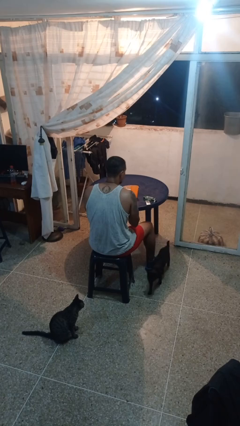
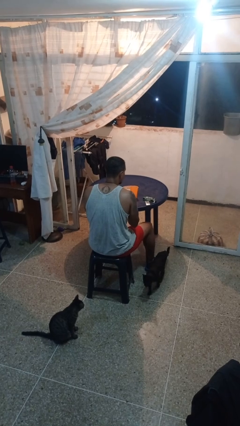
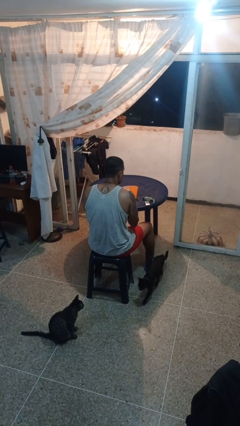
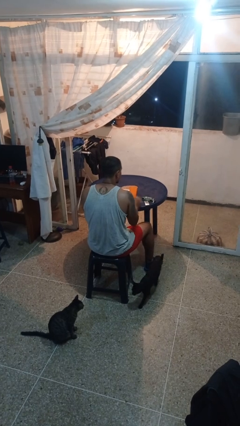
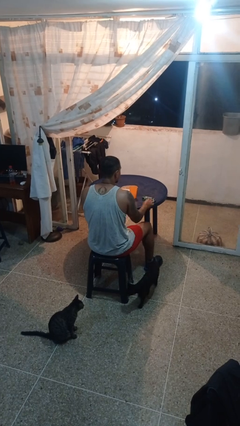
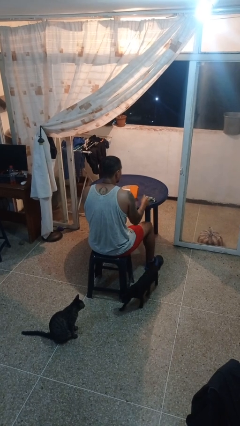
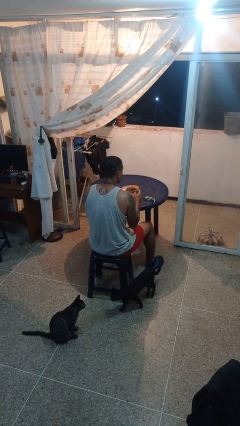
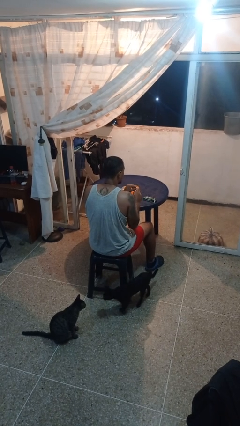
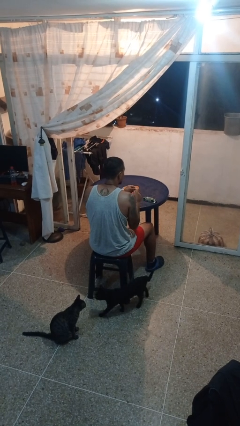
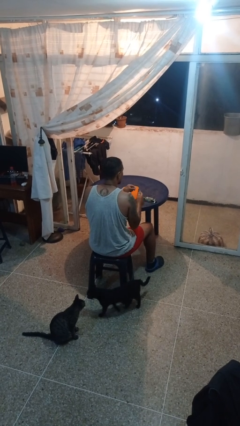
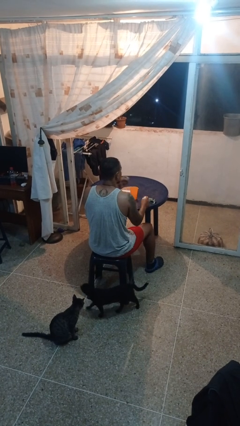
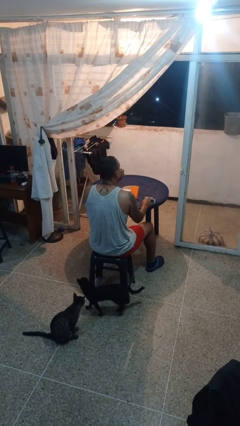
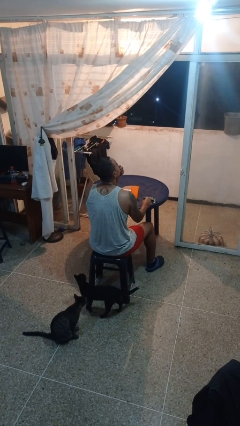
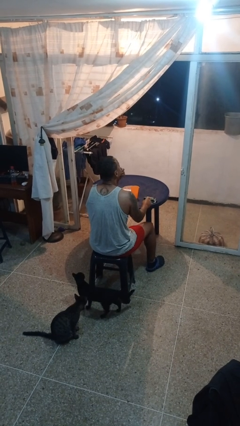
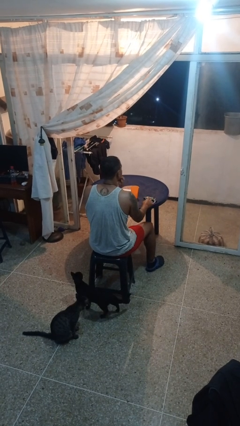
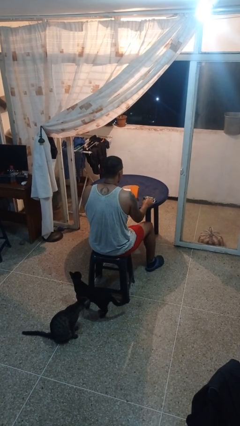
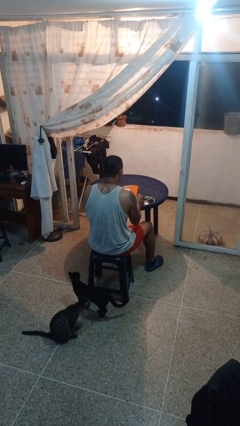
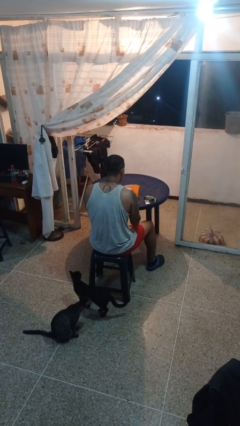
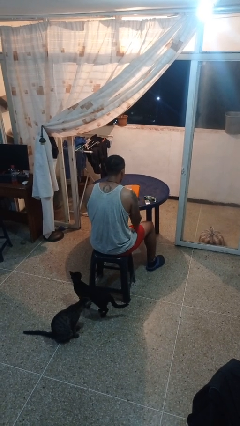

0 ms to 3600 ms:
person takes medicine pills

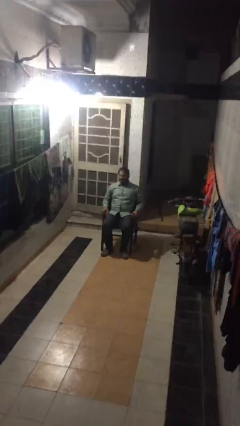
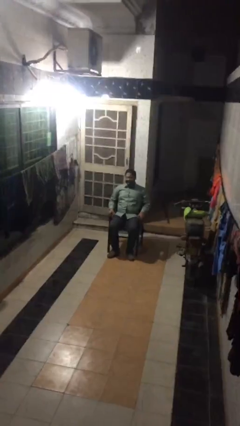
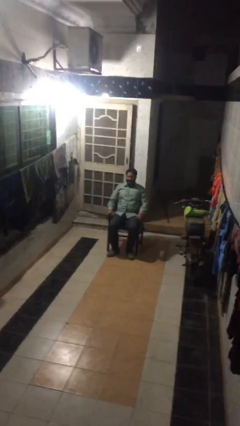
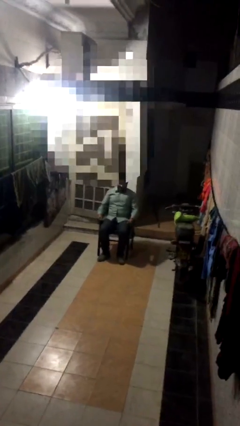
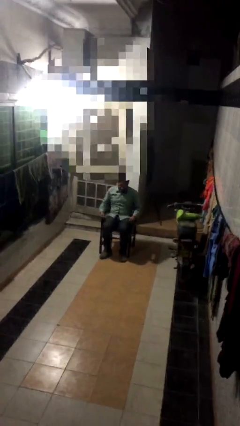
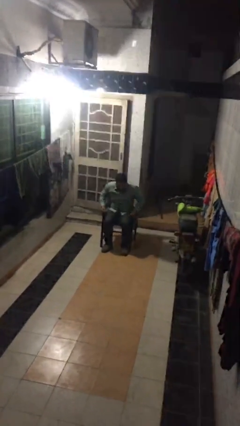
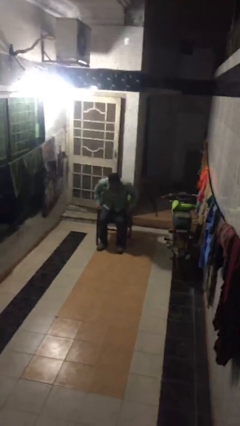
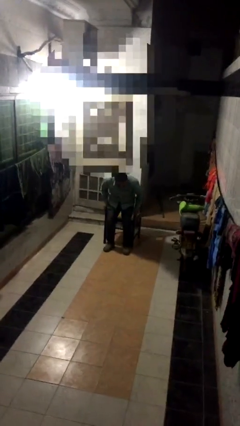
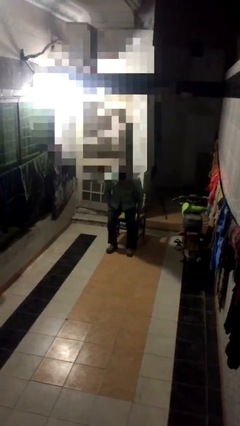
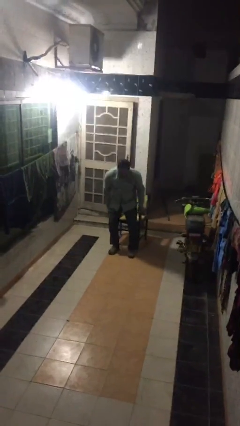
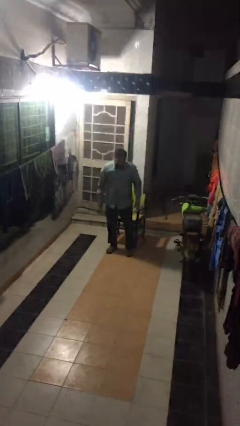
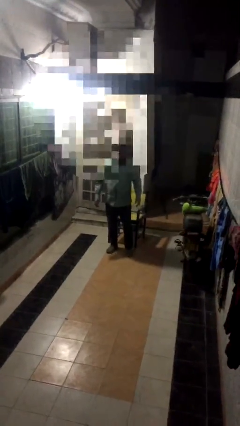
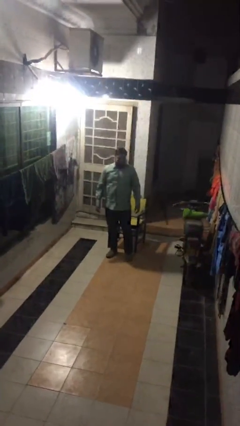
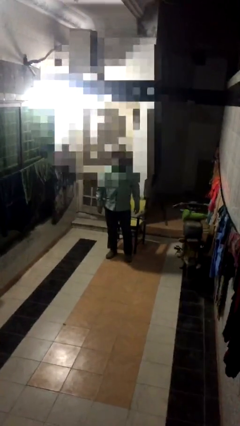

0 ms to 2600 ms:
person stands up

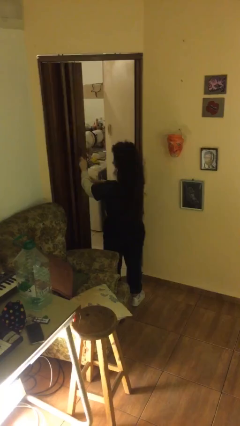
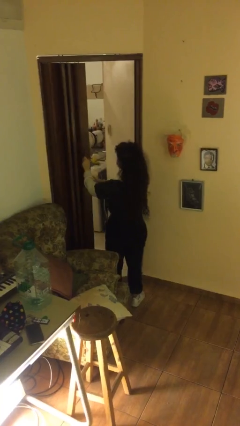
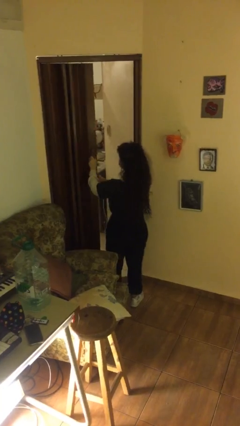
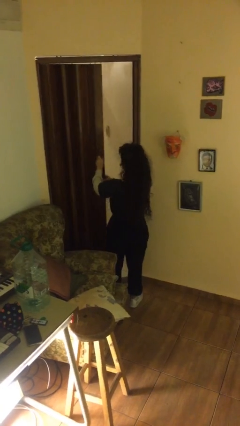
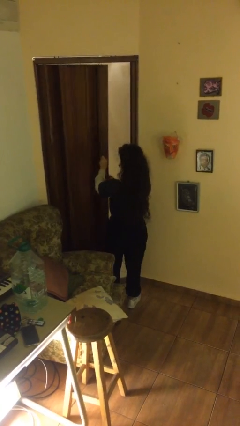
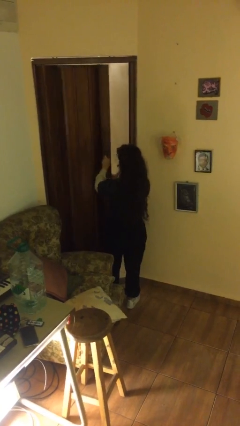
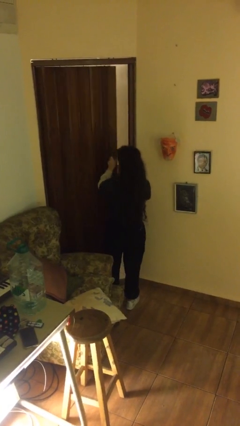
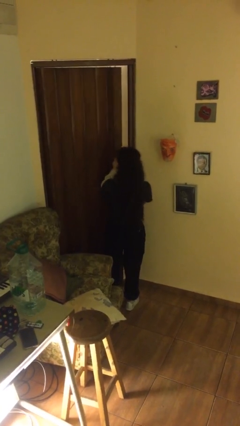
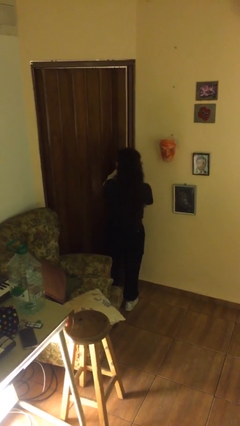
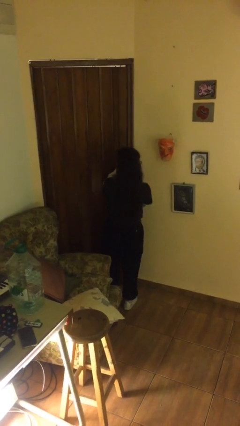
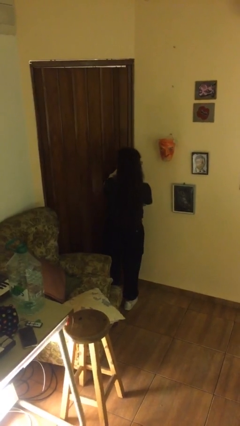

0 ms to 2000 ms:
person closes sliding door

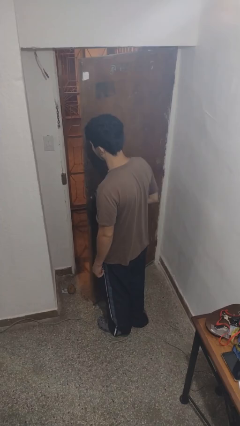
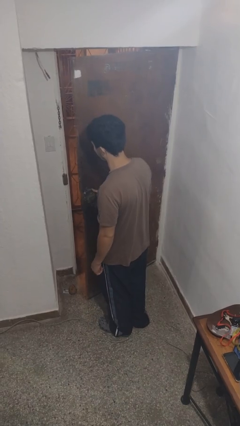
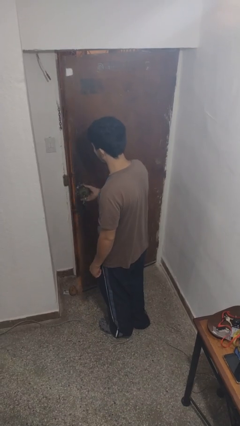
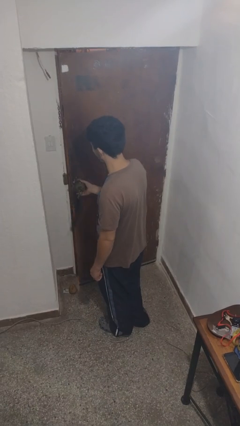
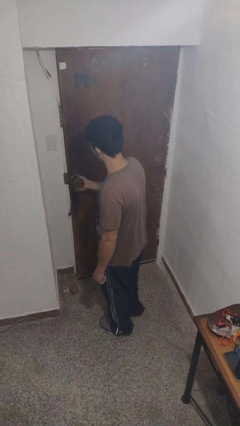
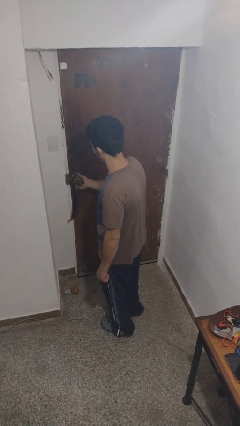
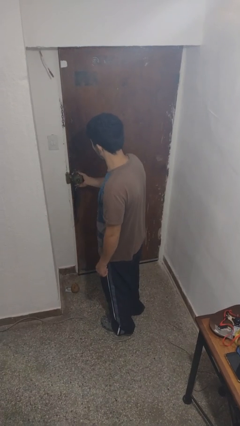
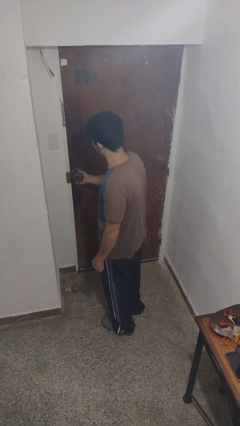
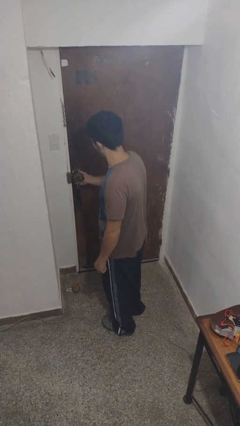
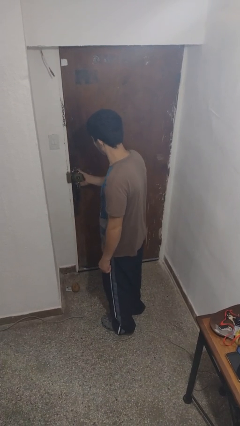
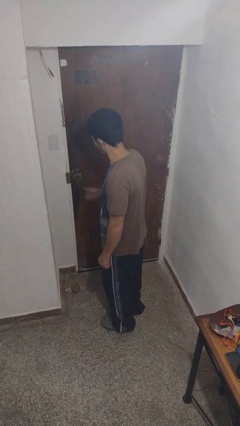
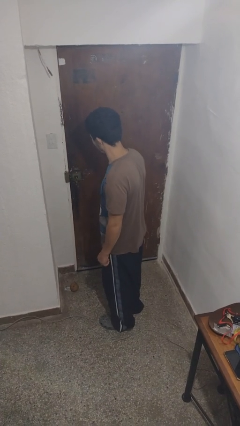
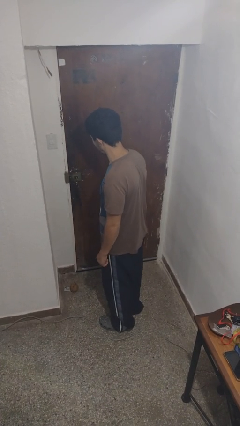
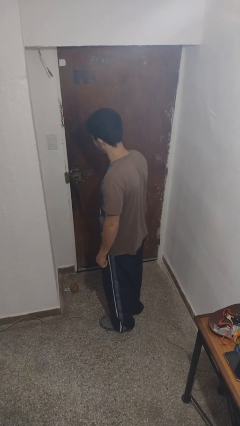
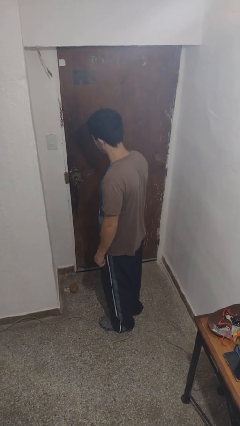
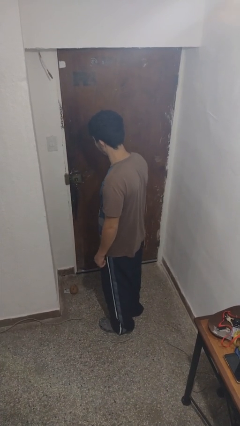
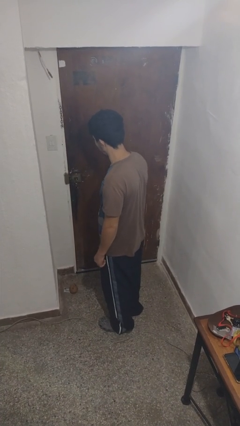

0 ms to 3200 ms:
person closes facility door

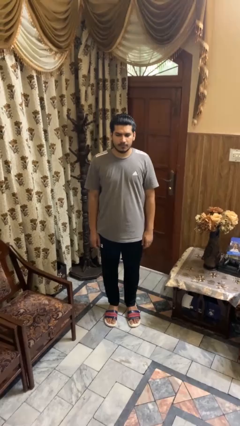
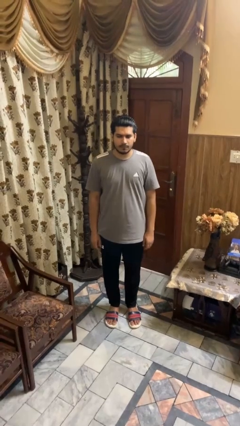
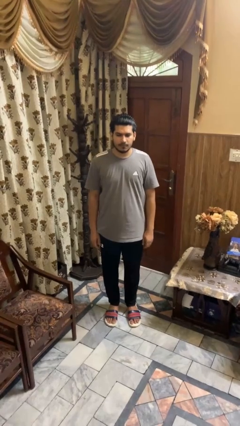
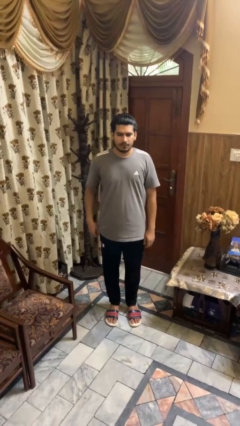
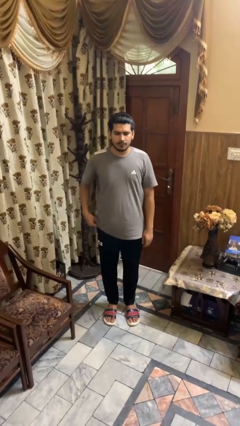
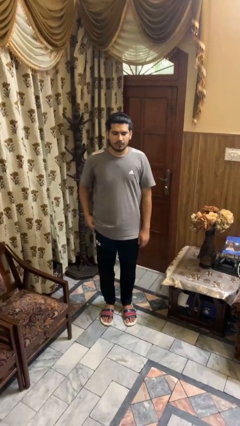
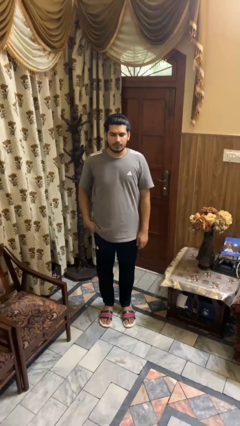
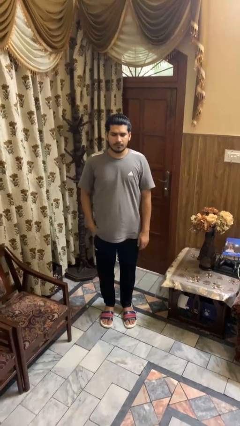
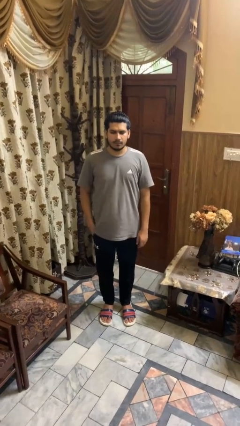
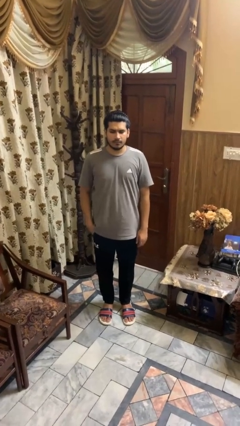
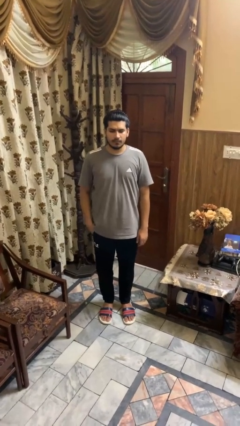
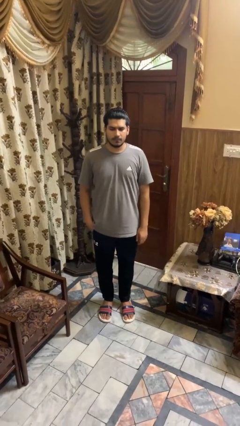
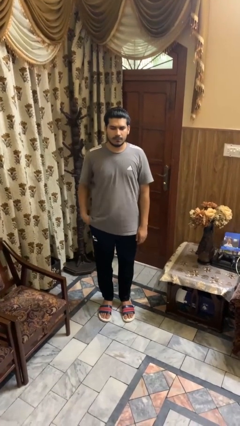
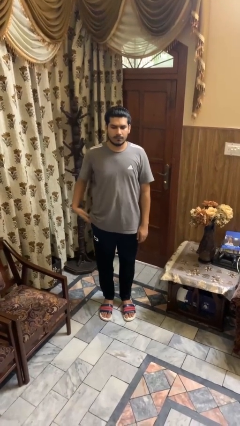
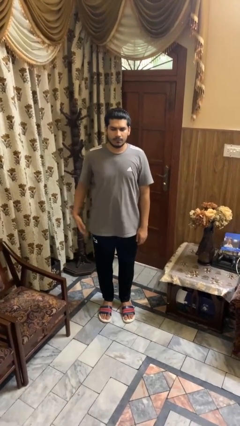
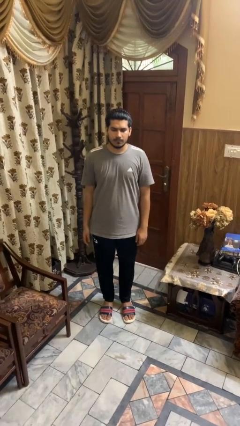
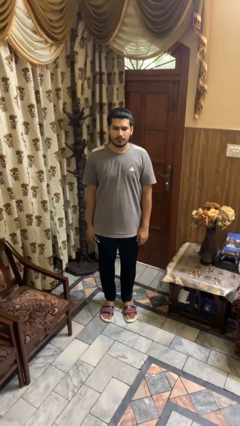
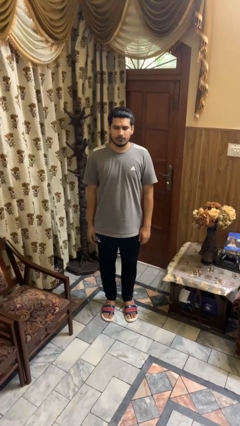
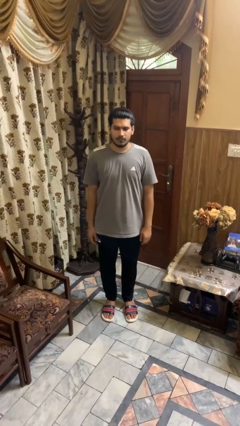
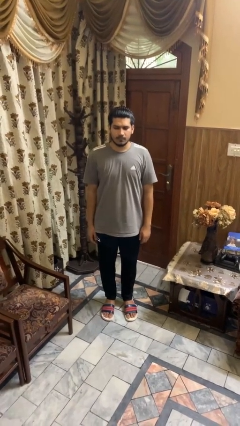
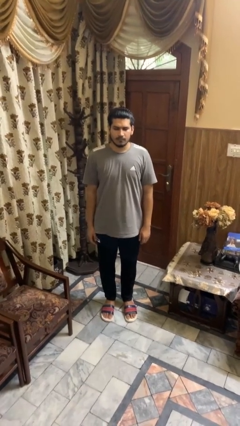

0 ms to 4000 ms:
person puts hands in back pockets

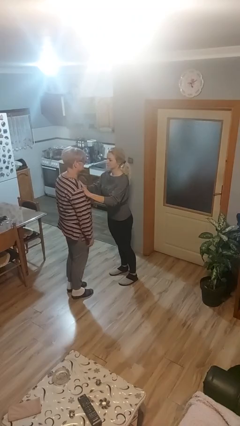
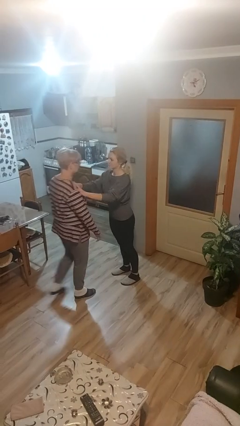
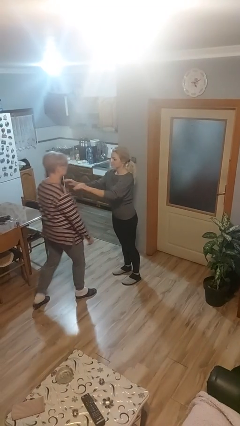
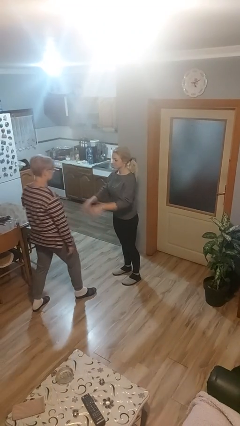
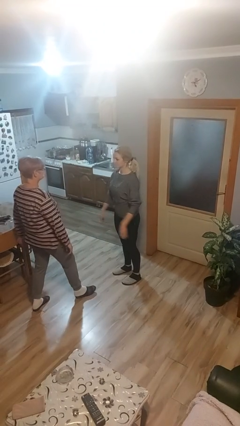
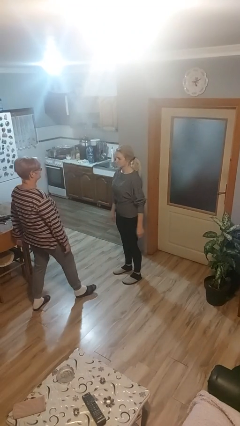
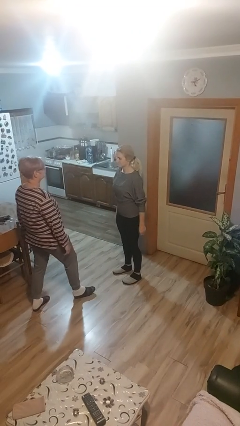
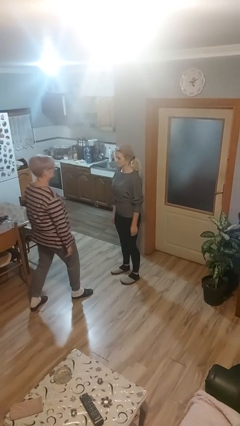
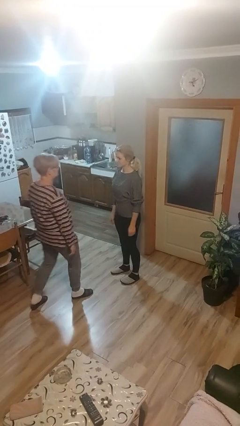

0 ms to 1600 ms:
person shoves person

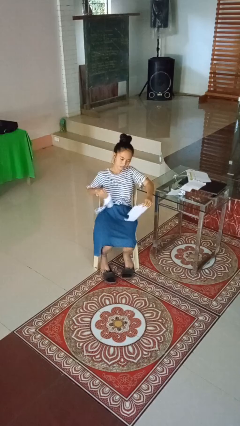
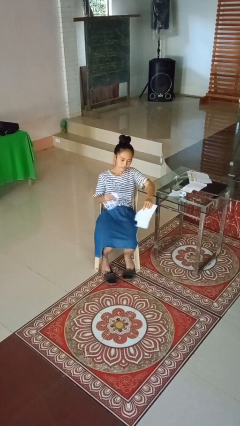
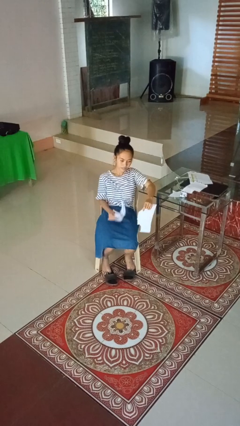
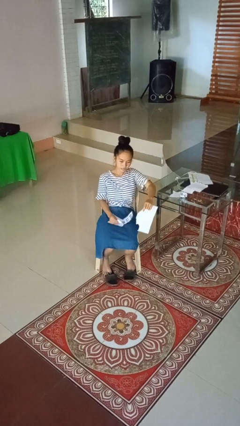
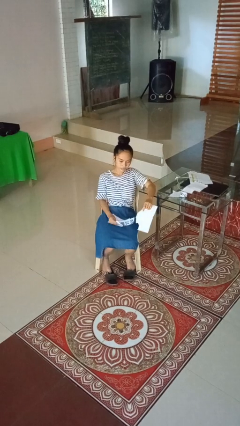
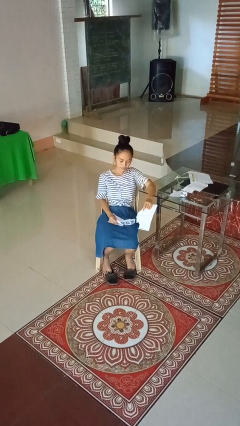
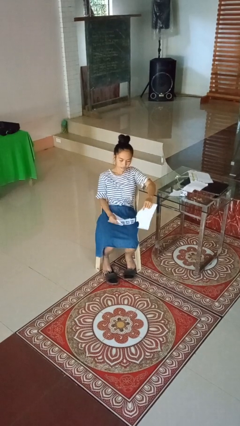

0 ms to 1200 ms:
person tears paper
